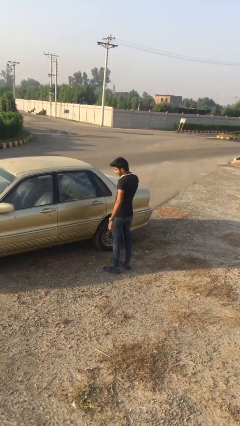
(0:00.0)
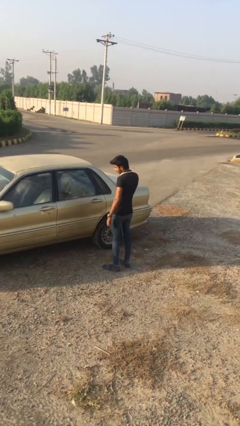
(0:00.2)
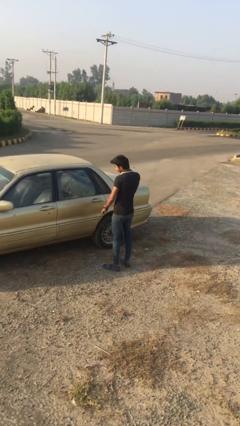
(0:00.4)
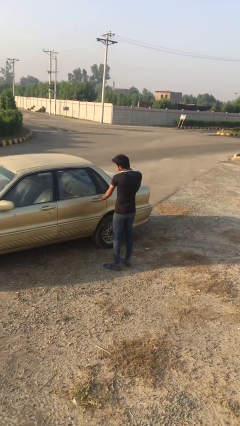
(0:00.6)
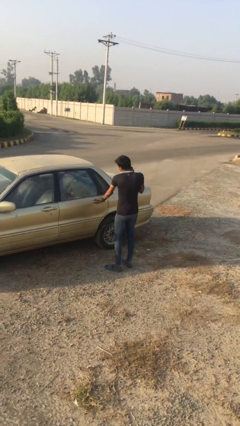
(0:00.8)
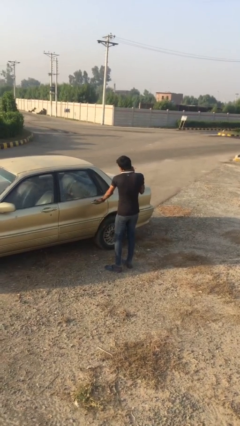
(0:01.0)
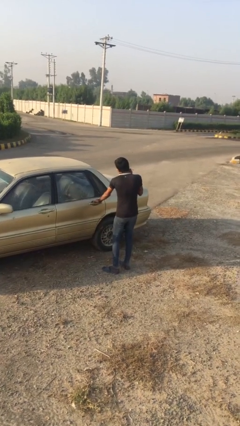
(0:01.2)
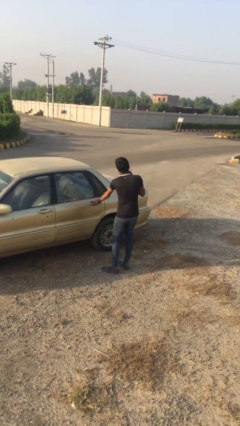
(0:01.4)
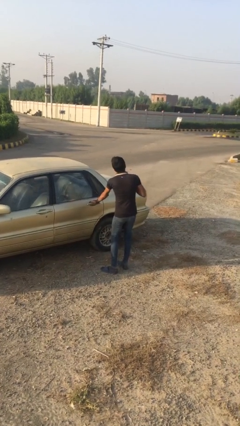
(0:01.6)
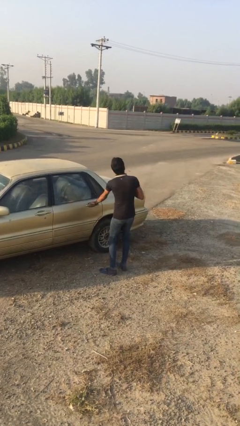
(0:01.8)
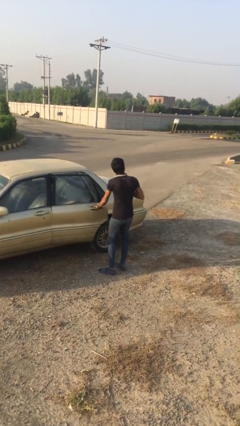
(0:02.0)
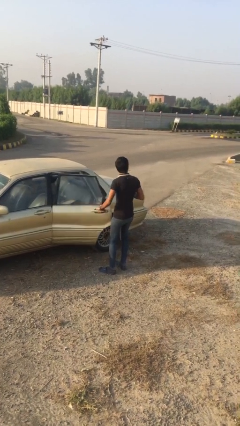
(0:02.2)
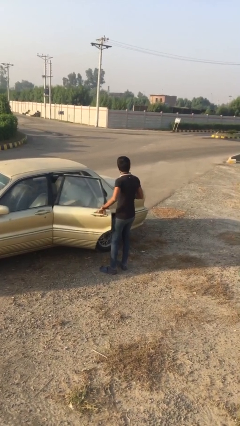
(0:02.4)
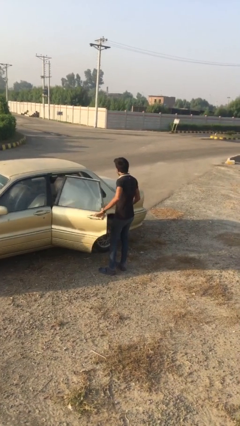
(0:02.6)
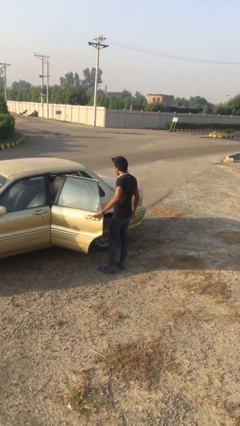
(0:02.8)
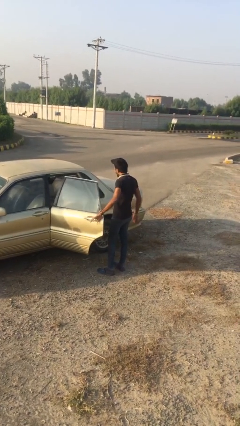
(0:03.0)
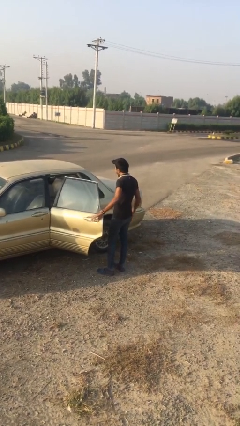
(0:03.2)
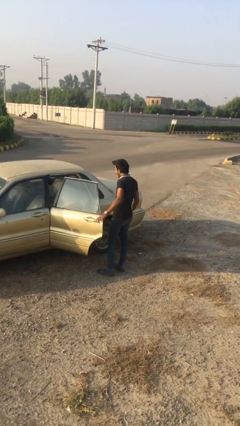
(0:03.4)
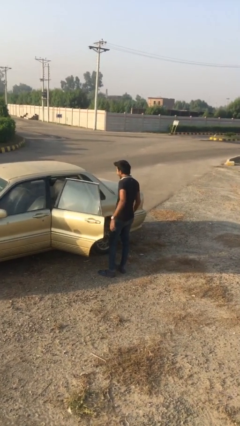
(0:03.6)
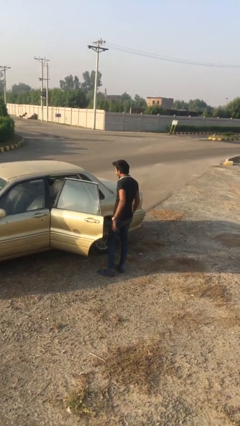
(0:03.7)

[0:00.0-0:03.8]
person opens car door

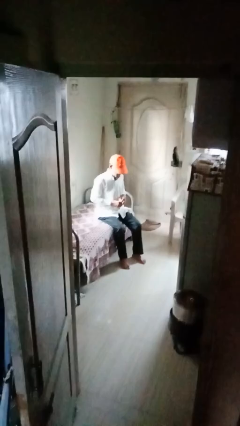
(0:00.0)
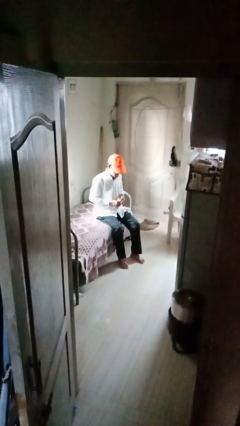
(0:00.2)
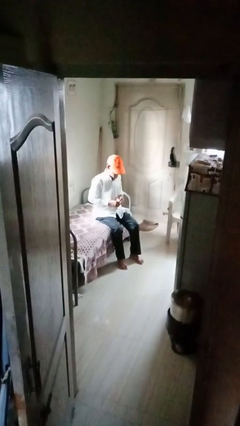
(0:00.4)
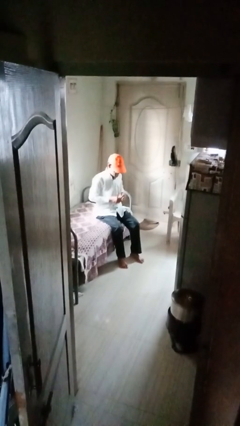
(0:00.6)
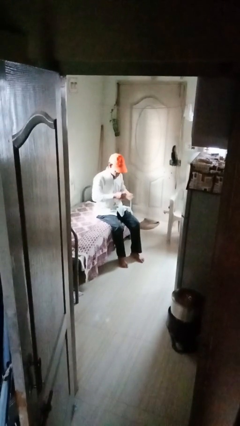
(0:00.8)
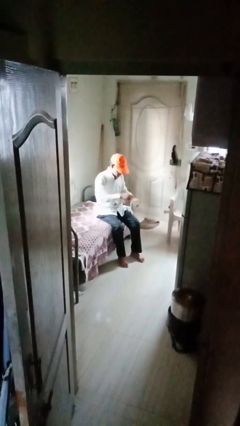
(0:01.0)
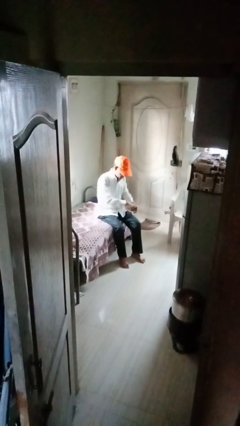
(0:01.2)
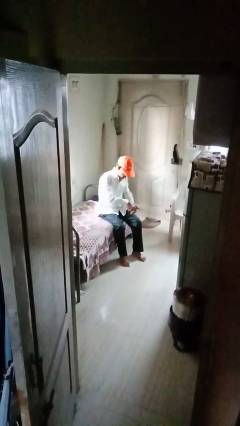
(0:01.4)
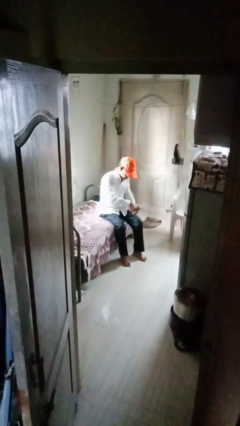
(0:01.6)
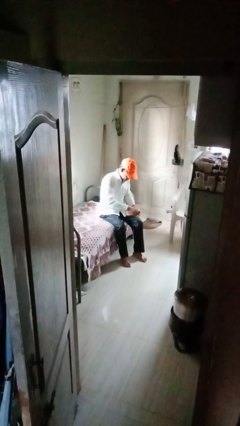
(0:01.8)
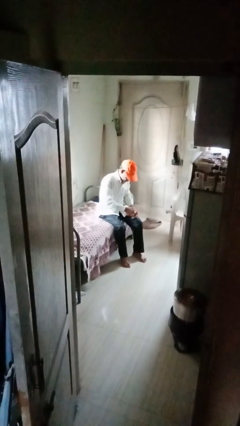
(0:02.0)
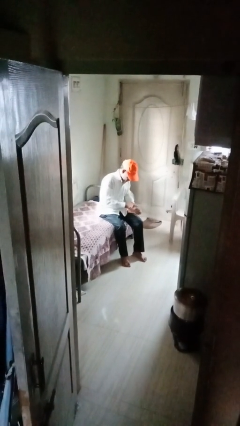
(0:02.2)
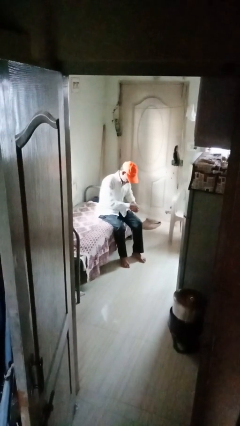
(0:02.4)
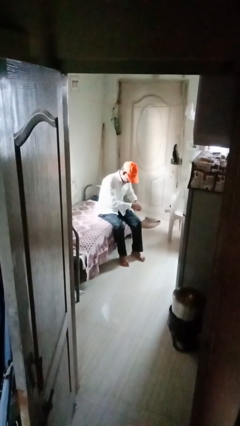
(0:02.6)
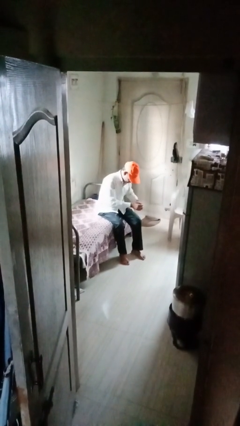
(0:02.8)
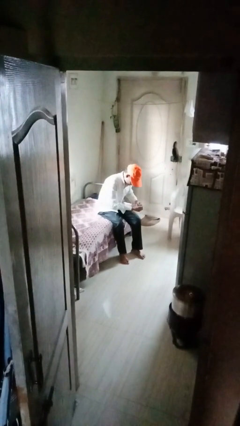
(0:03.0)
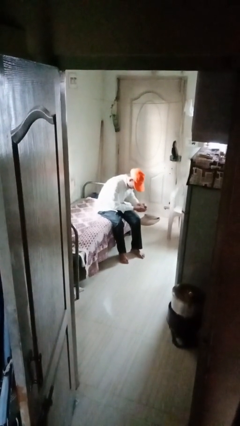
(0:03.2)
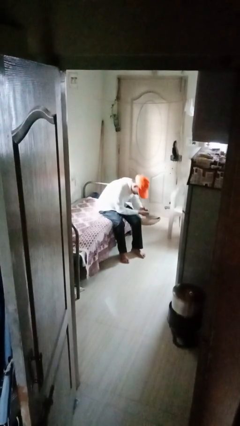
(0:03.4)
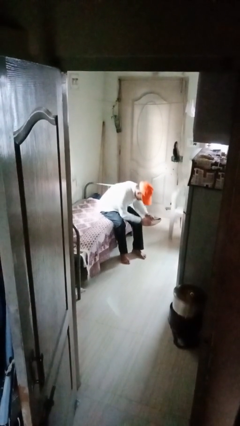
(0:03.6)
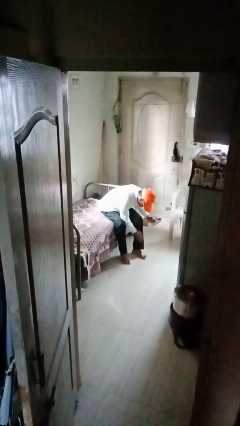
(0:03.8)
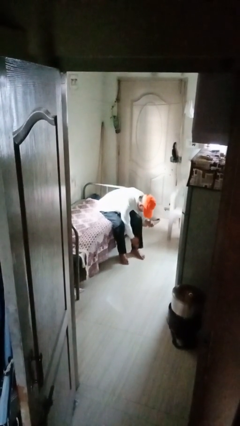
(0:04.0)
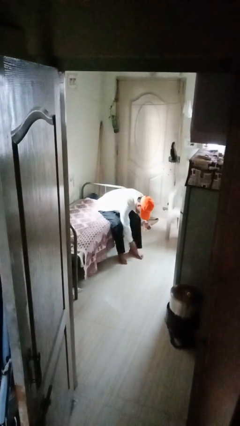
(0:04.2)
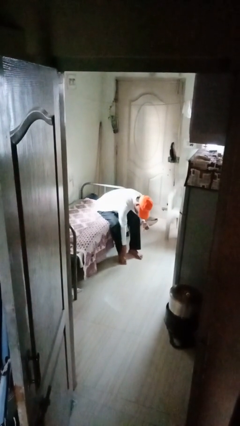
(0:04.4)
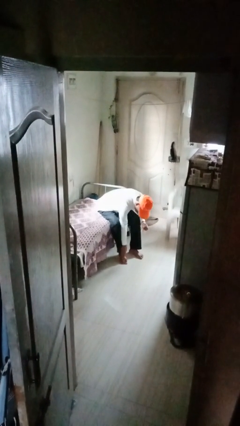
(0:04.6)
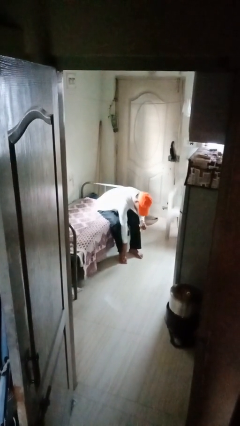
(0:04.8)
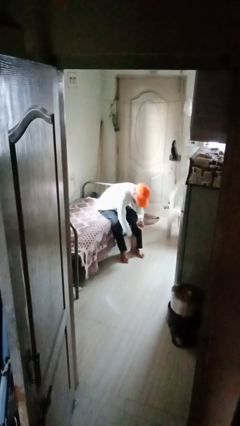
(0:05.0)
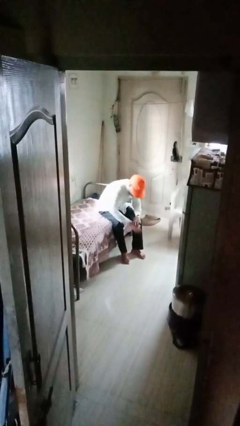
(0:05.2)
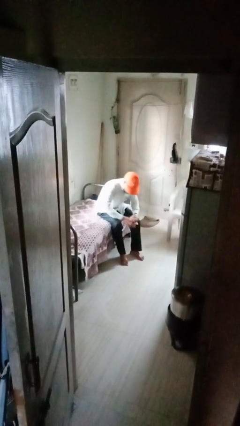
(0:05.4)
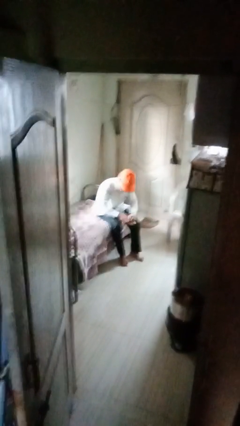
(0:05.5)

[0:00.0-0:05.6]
person applies facial moisturizer

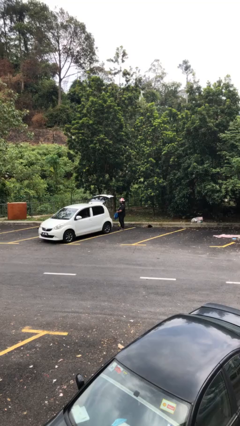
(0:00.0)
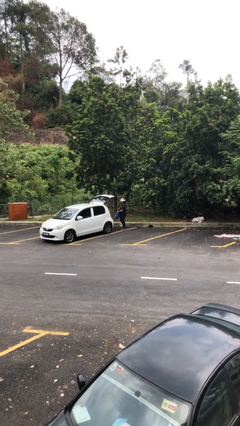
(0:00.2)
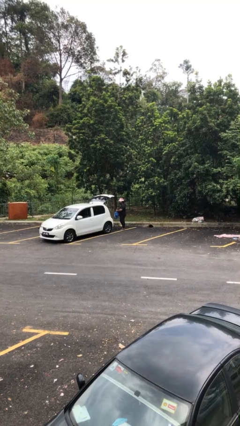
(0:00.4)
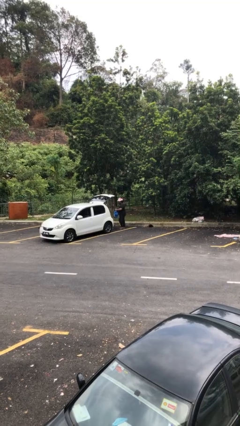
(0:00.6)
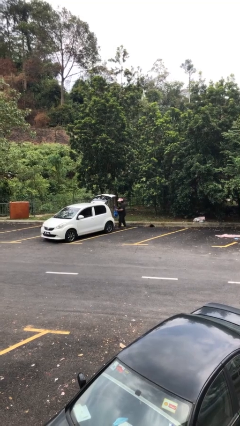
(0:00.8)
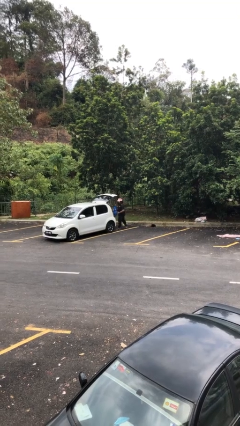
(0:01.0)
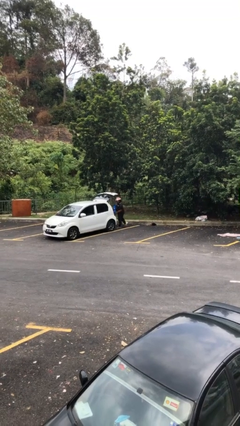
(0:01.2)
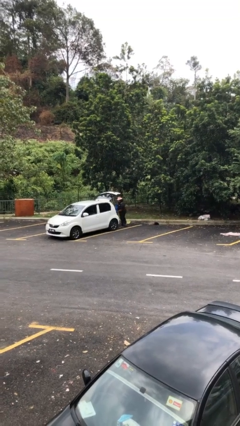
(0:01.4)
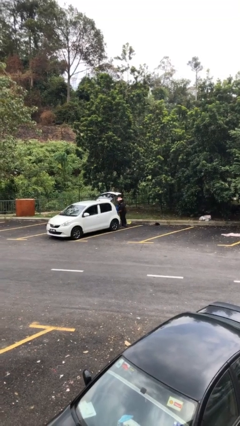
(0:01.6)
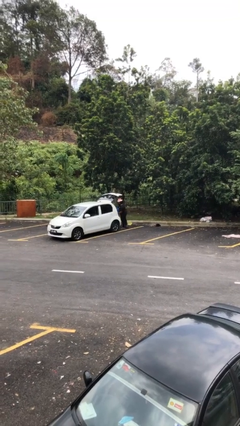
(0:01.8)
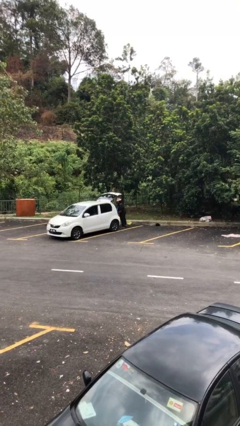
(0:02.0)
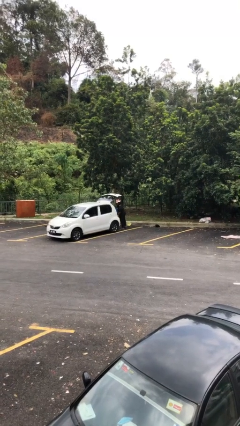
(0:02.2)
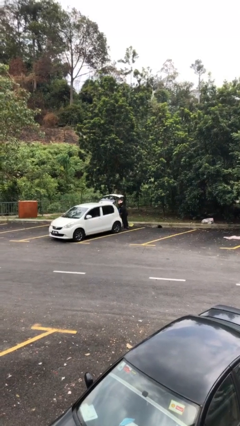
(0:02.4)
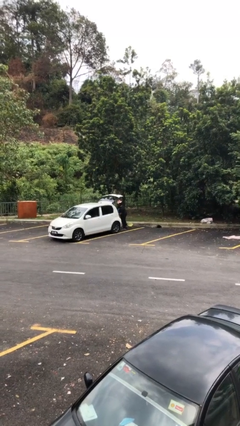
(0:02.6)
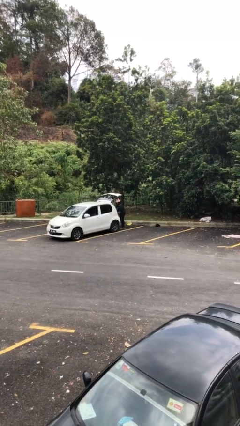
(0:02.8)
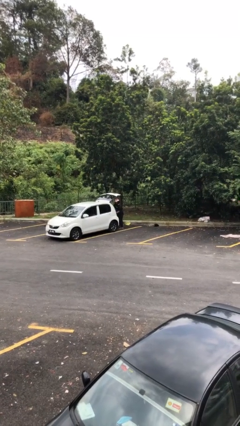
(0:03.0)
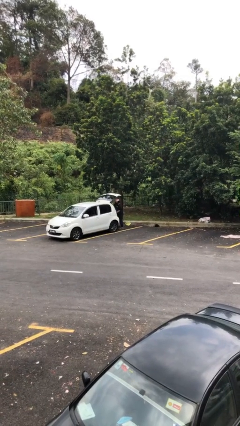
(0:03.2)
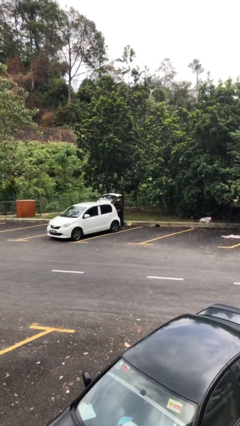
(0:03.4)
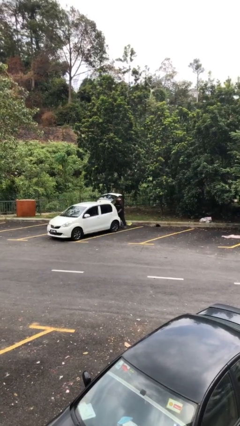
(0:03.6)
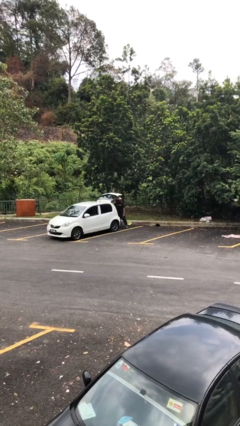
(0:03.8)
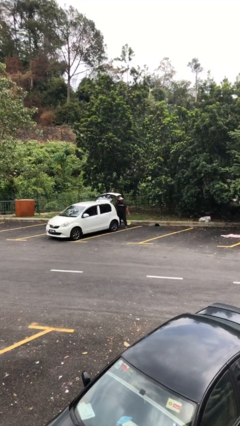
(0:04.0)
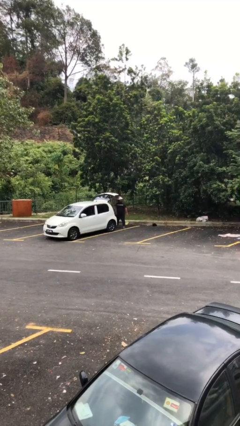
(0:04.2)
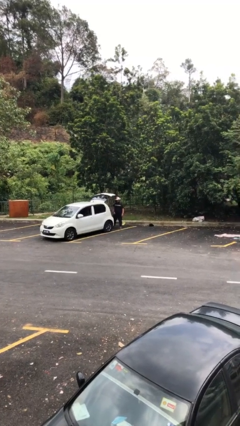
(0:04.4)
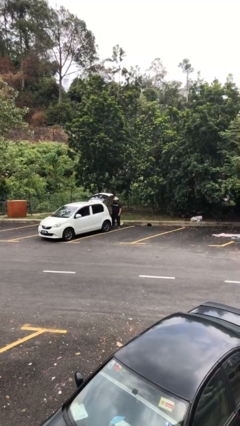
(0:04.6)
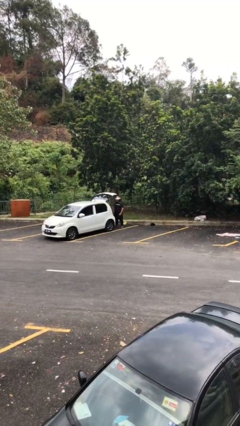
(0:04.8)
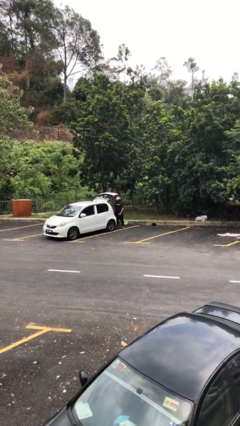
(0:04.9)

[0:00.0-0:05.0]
person loads car

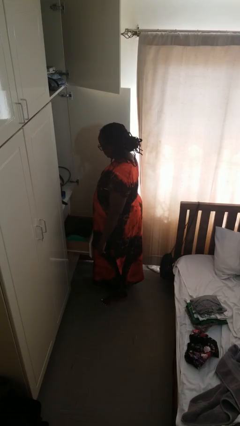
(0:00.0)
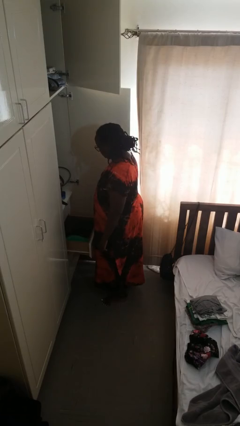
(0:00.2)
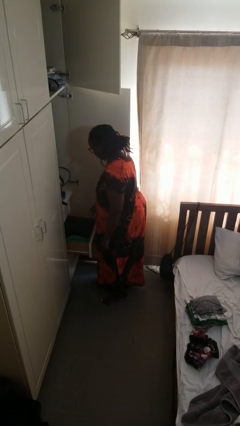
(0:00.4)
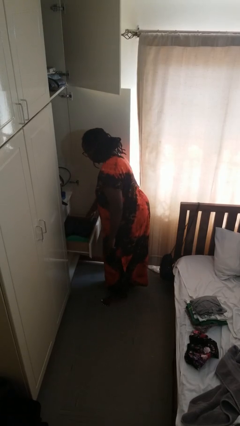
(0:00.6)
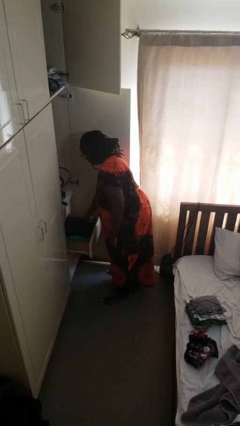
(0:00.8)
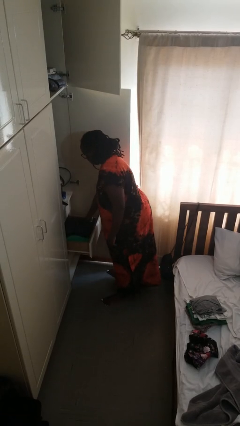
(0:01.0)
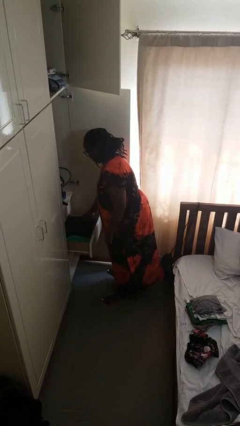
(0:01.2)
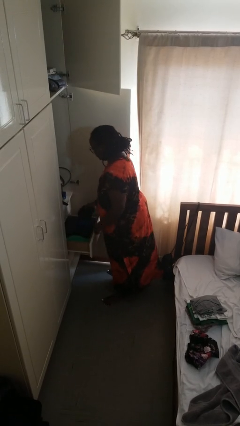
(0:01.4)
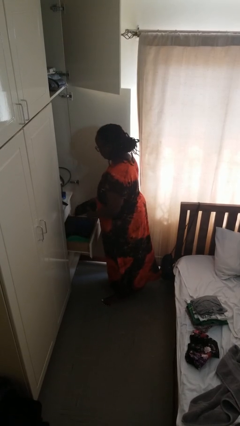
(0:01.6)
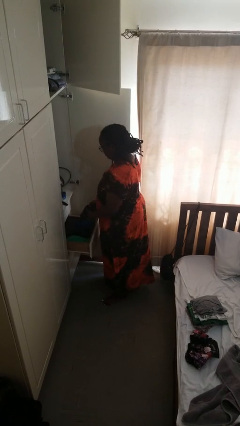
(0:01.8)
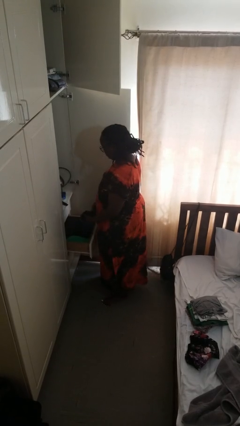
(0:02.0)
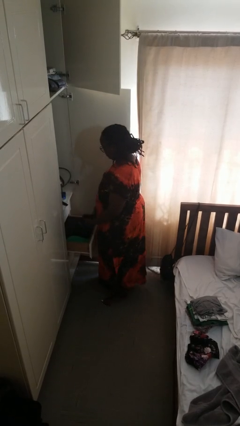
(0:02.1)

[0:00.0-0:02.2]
person takes clothes from dresser

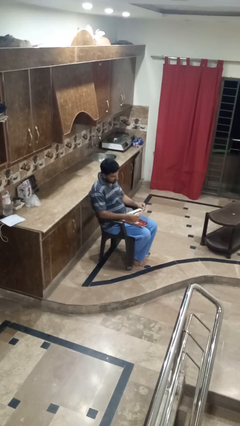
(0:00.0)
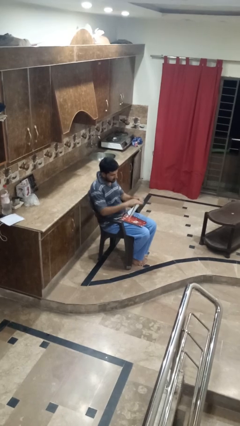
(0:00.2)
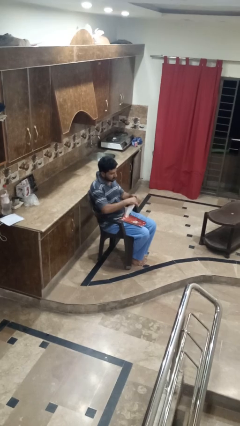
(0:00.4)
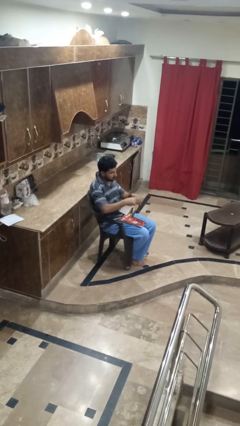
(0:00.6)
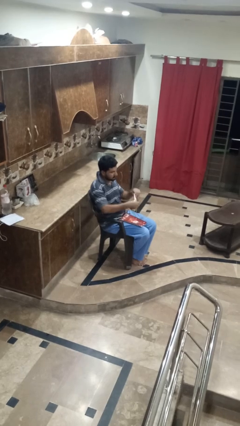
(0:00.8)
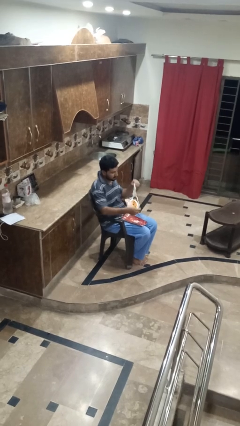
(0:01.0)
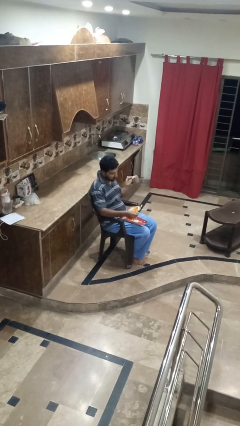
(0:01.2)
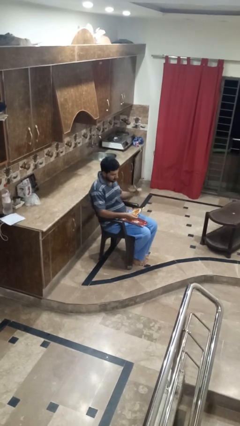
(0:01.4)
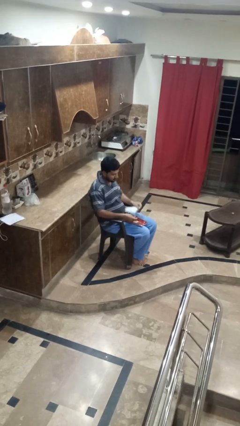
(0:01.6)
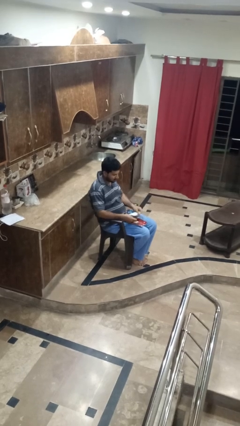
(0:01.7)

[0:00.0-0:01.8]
person tears paper
